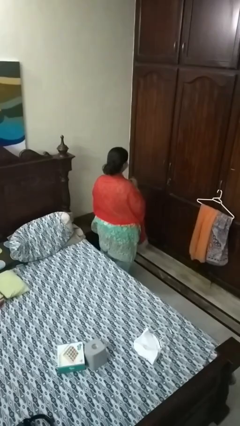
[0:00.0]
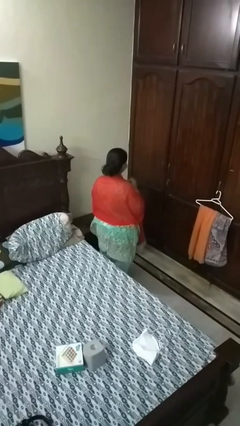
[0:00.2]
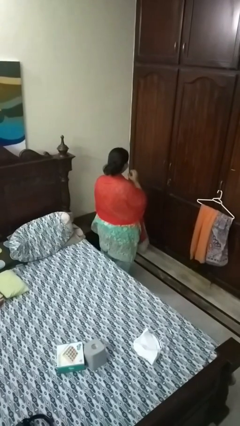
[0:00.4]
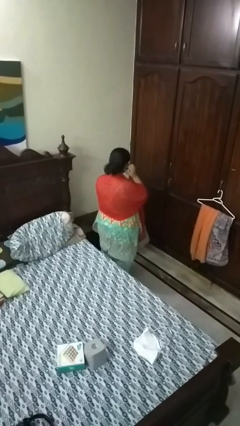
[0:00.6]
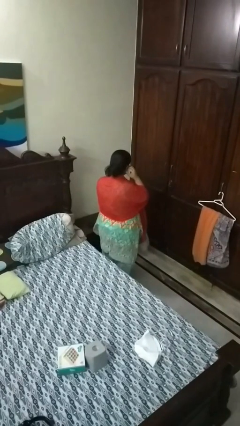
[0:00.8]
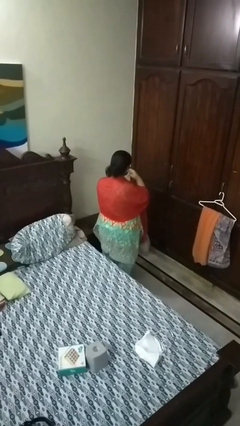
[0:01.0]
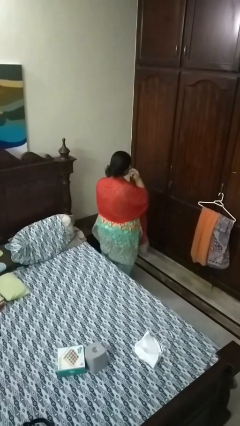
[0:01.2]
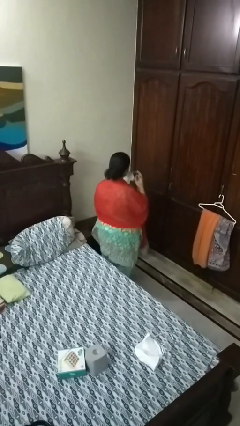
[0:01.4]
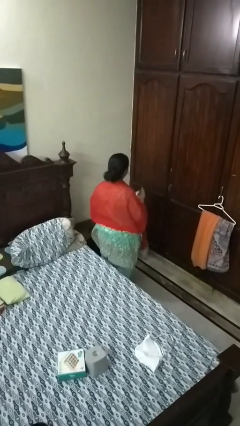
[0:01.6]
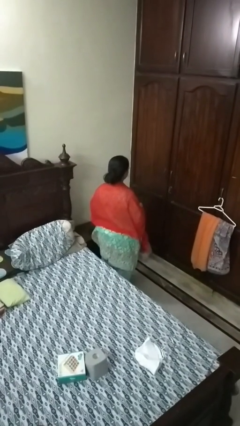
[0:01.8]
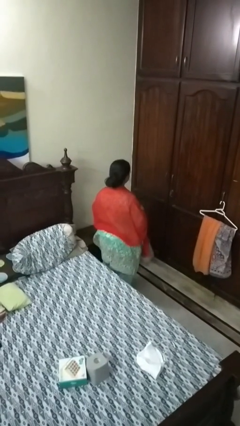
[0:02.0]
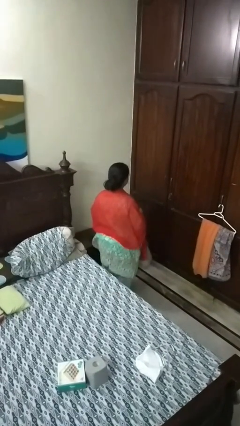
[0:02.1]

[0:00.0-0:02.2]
person takes off facemask

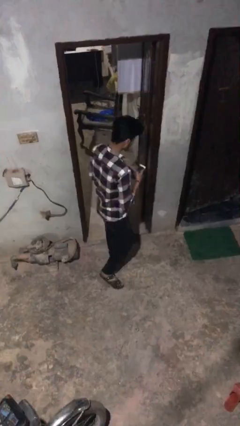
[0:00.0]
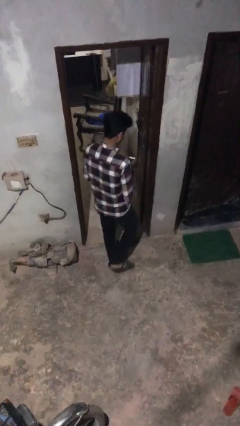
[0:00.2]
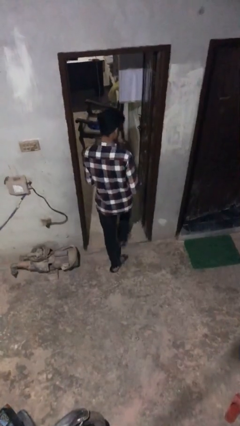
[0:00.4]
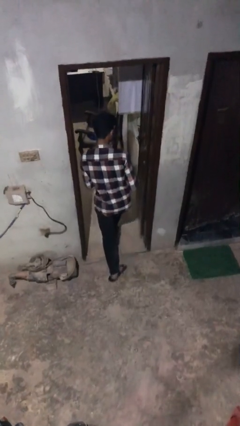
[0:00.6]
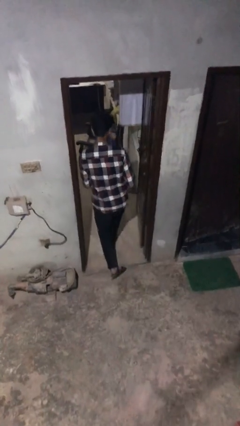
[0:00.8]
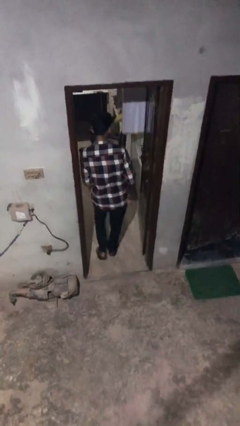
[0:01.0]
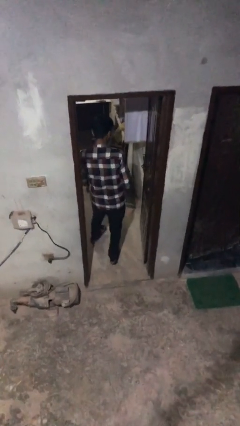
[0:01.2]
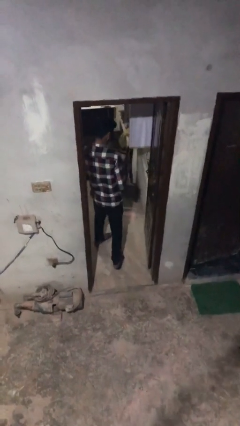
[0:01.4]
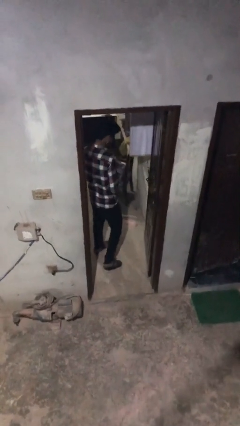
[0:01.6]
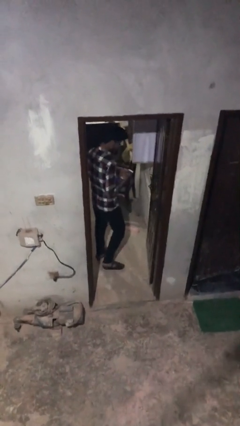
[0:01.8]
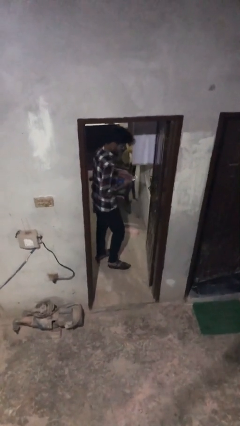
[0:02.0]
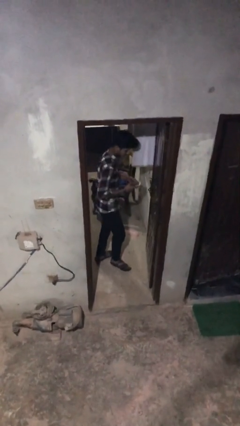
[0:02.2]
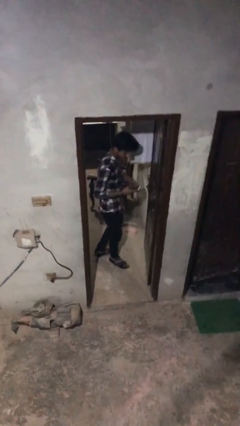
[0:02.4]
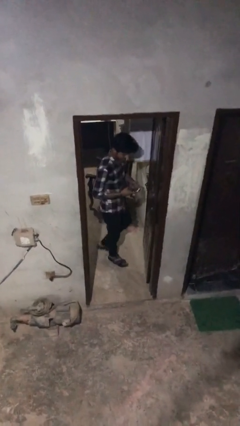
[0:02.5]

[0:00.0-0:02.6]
person exits scene through structure

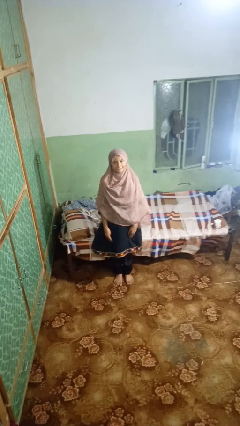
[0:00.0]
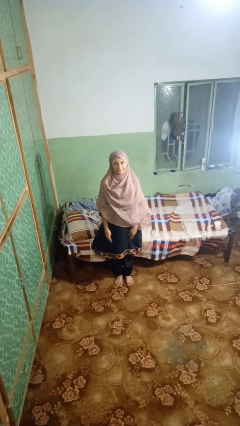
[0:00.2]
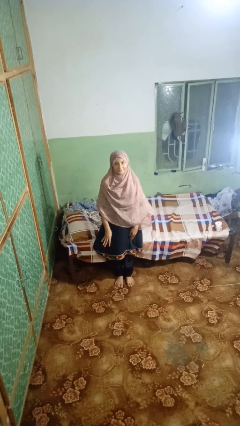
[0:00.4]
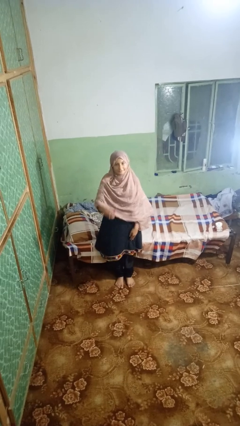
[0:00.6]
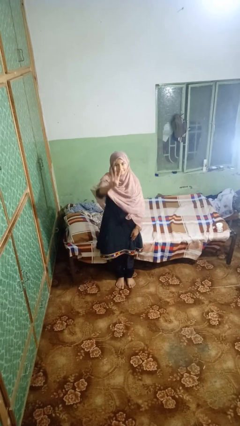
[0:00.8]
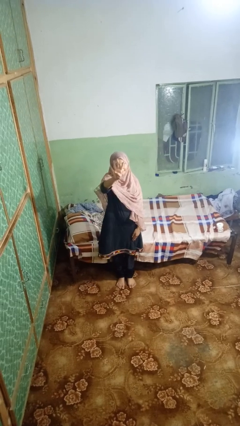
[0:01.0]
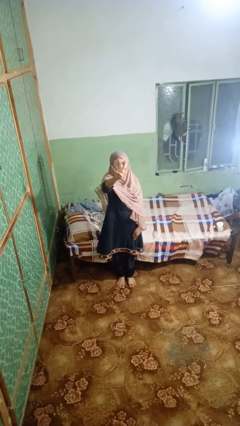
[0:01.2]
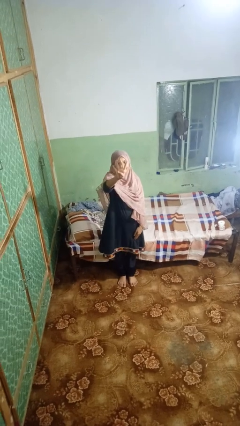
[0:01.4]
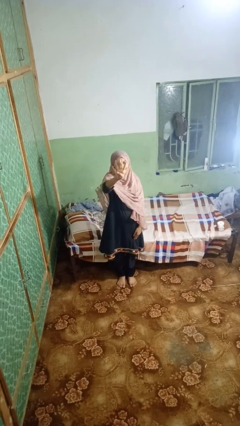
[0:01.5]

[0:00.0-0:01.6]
person gestures number four

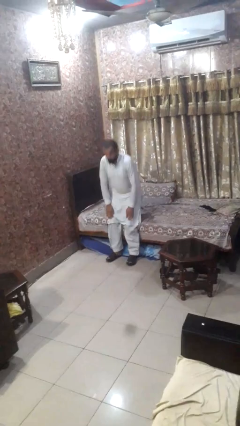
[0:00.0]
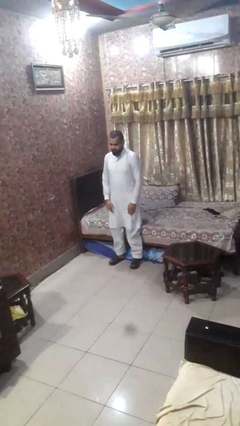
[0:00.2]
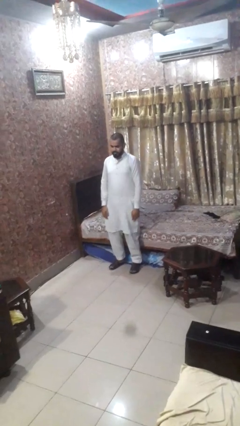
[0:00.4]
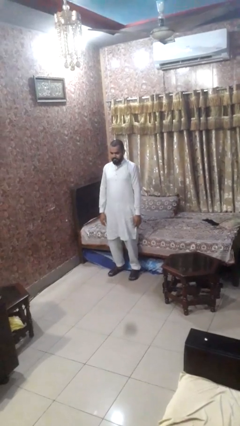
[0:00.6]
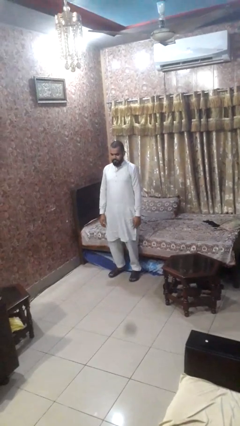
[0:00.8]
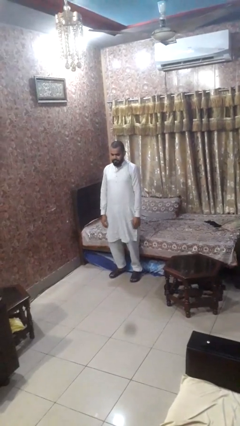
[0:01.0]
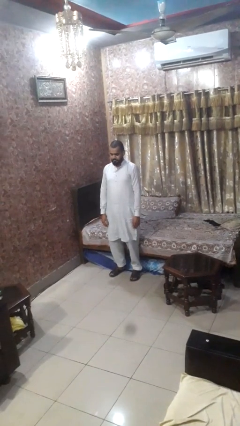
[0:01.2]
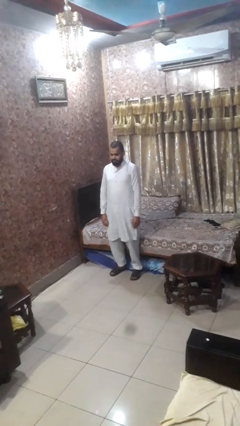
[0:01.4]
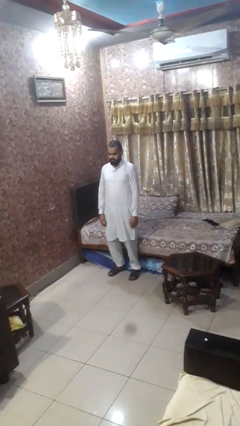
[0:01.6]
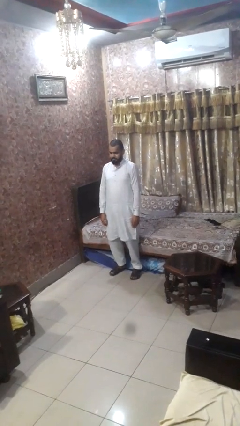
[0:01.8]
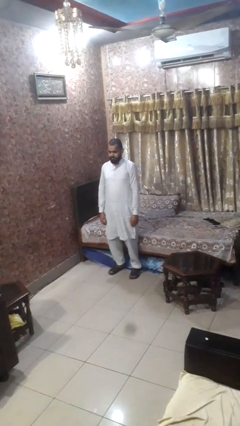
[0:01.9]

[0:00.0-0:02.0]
person stands up

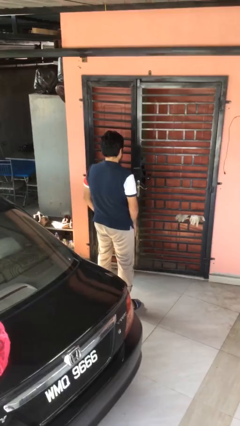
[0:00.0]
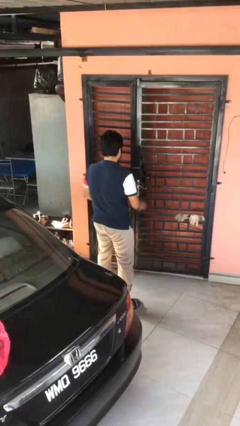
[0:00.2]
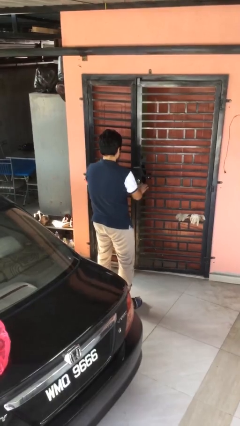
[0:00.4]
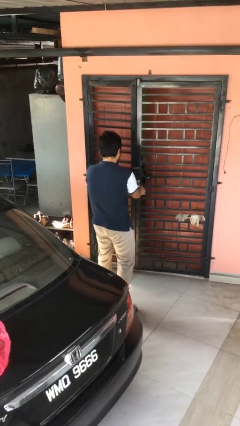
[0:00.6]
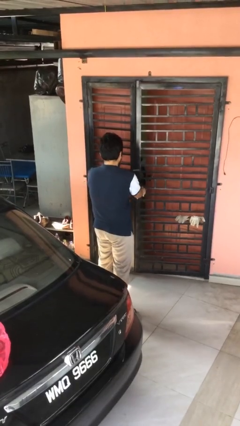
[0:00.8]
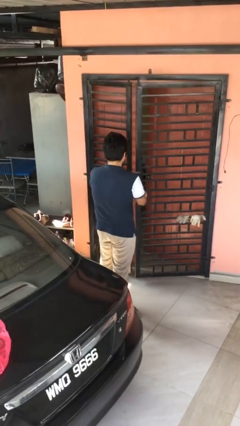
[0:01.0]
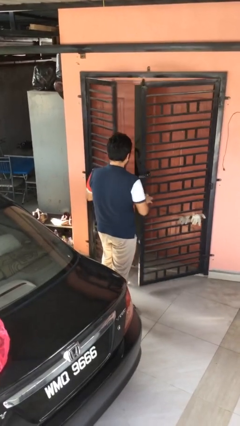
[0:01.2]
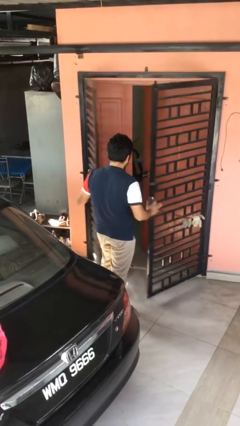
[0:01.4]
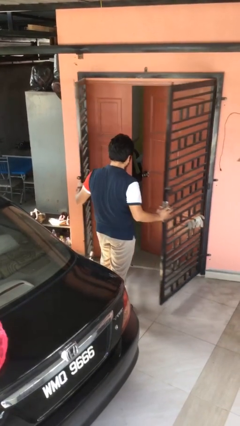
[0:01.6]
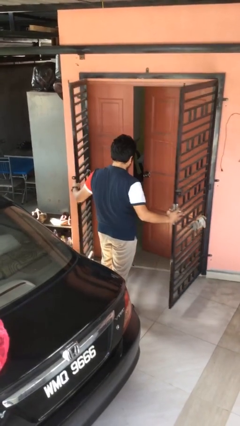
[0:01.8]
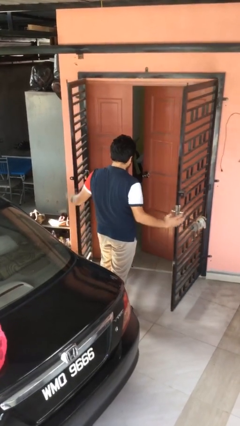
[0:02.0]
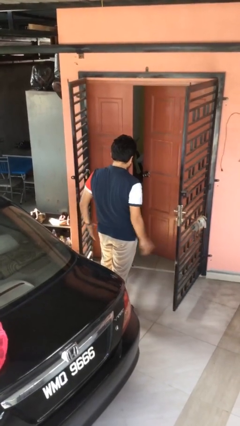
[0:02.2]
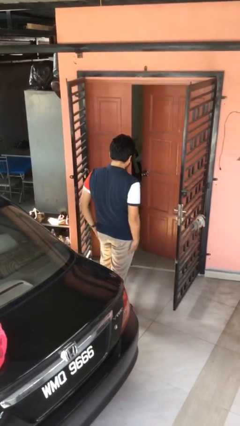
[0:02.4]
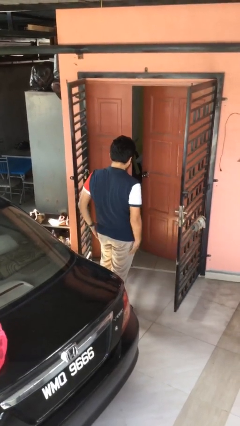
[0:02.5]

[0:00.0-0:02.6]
person opens gate

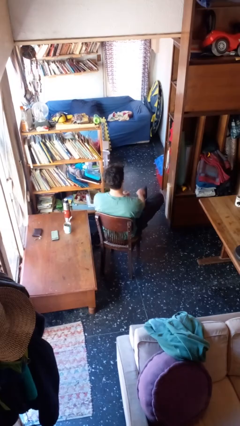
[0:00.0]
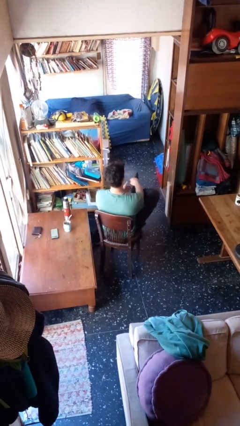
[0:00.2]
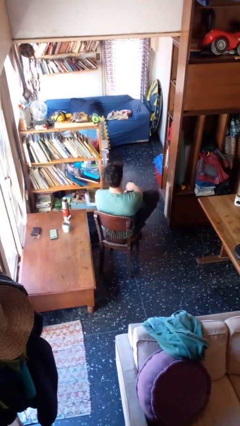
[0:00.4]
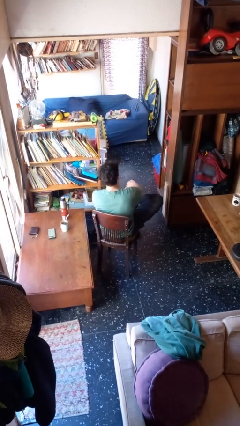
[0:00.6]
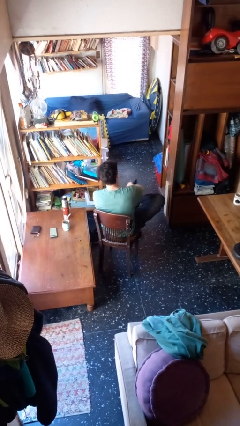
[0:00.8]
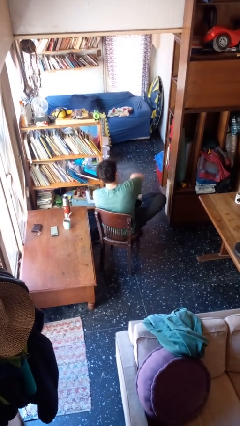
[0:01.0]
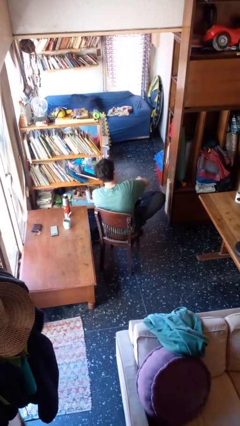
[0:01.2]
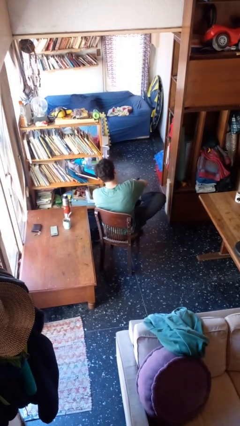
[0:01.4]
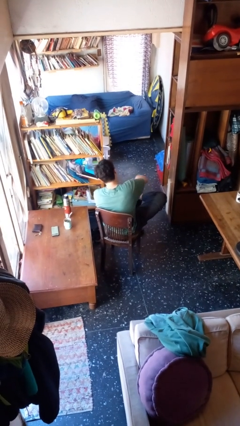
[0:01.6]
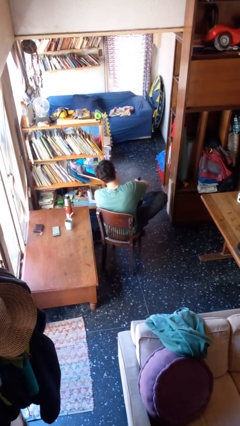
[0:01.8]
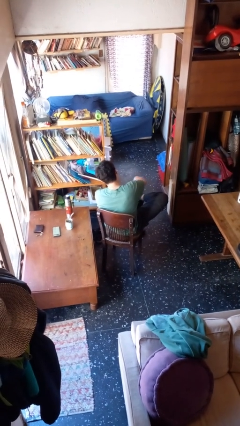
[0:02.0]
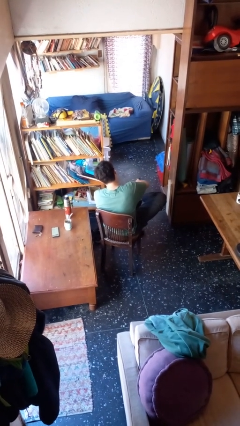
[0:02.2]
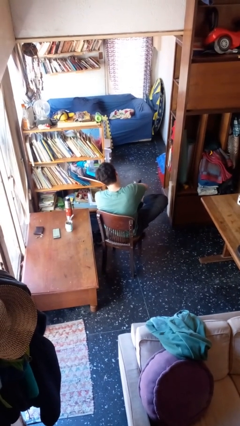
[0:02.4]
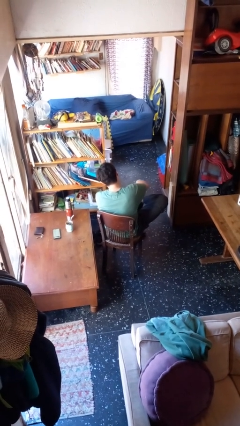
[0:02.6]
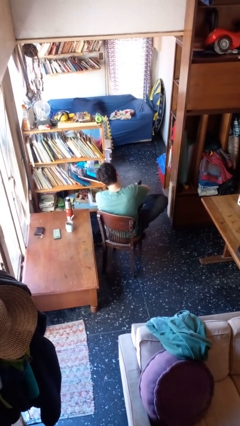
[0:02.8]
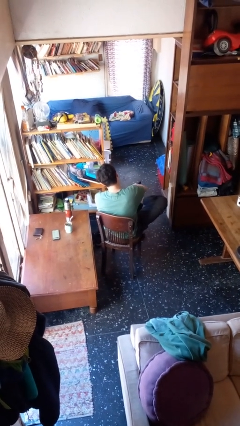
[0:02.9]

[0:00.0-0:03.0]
person rubs foot

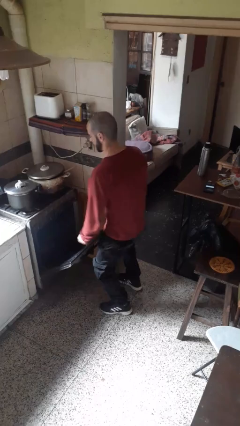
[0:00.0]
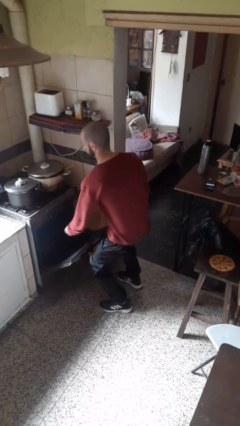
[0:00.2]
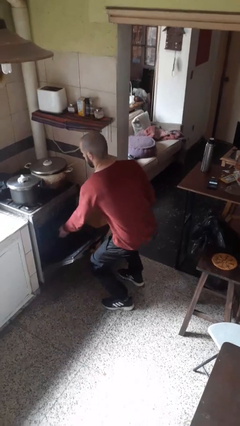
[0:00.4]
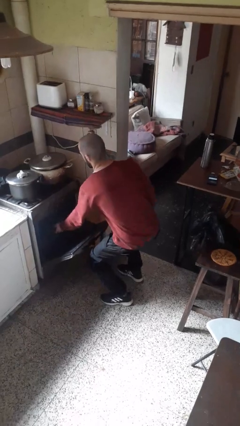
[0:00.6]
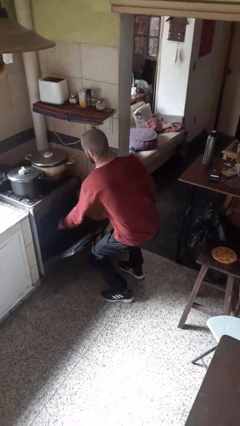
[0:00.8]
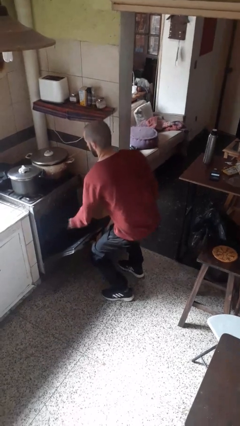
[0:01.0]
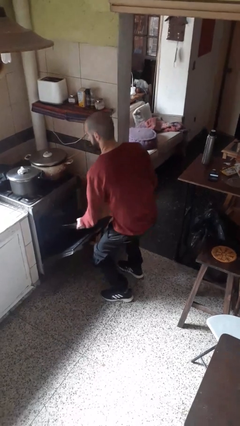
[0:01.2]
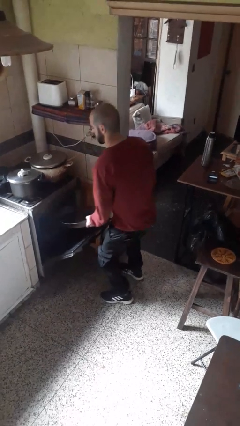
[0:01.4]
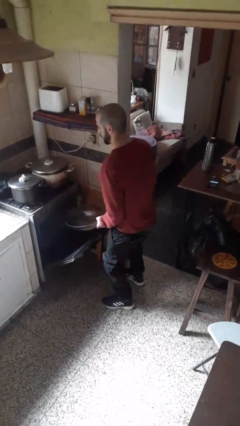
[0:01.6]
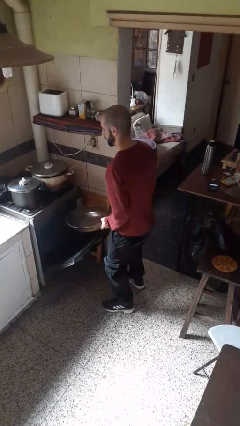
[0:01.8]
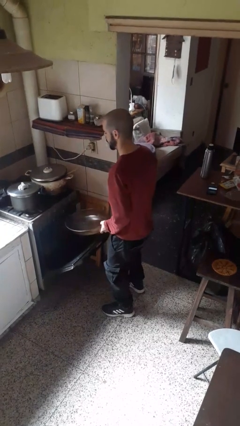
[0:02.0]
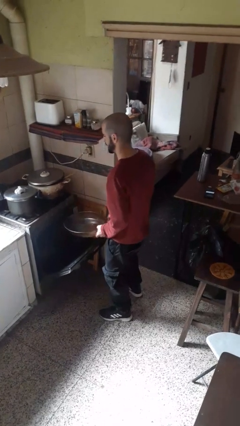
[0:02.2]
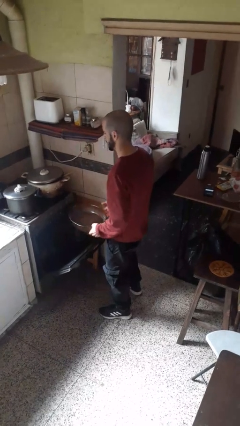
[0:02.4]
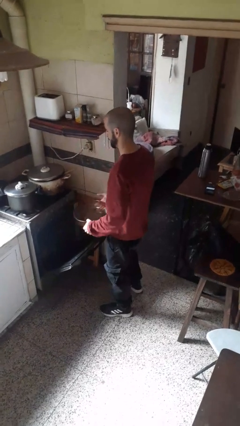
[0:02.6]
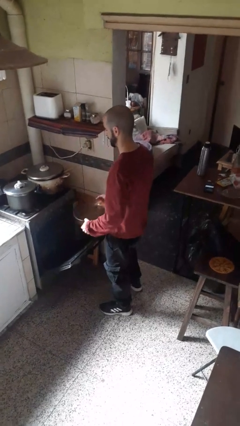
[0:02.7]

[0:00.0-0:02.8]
person takes object from oven
